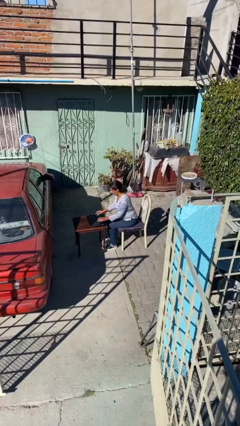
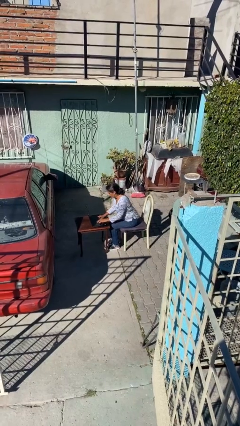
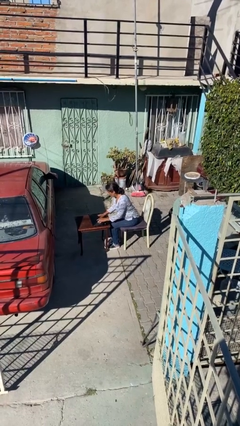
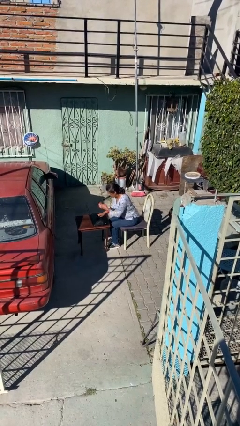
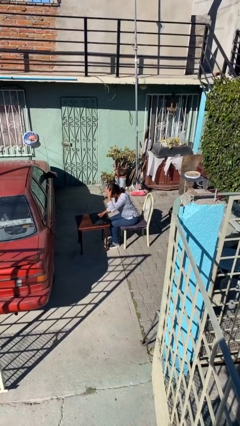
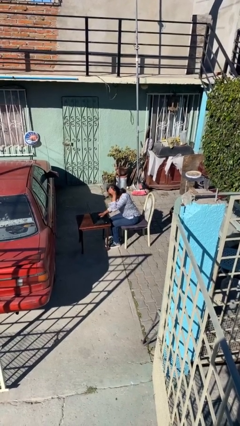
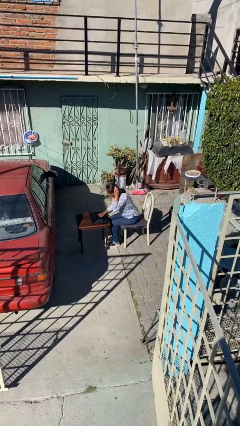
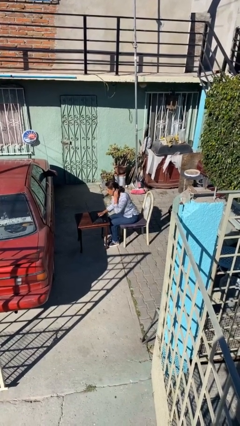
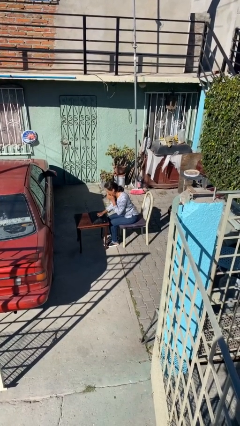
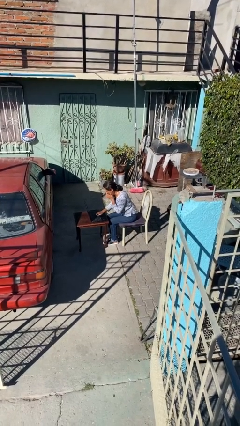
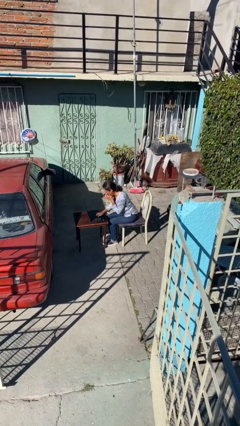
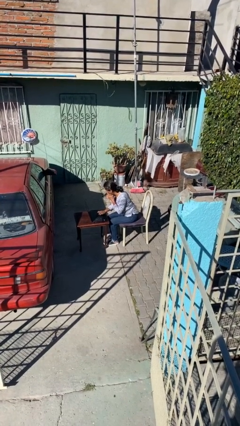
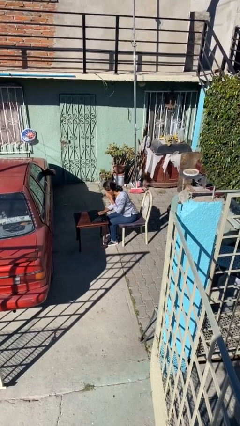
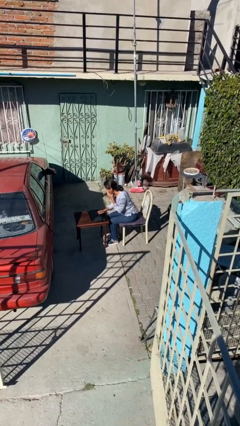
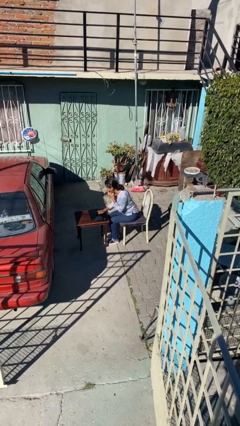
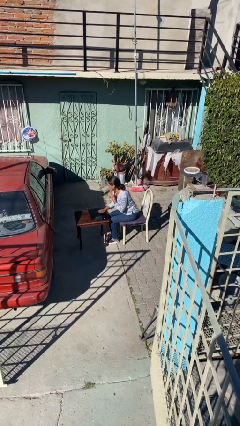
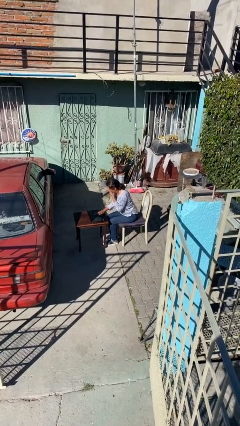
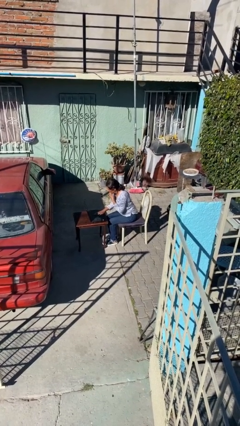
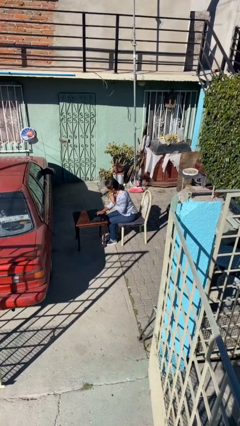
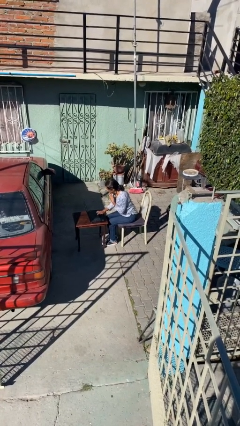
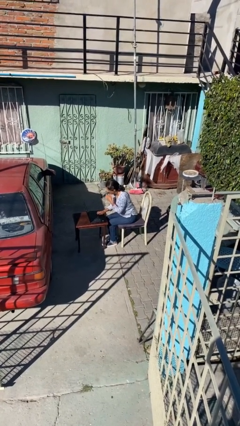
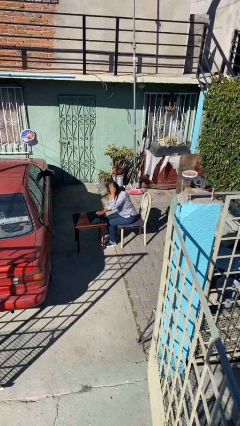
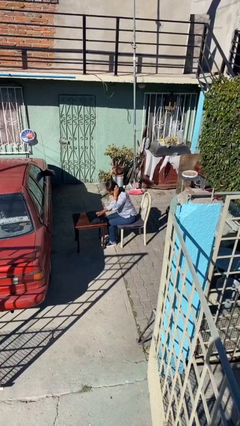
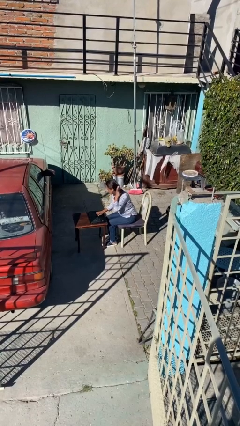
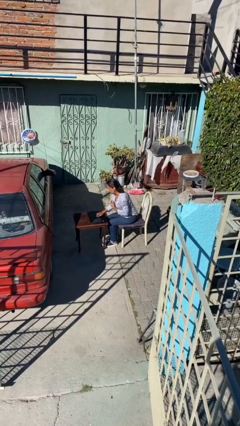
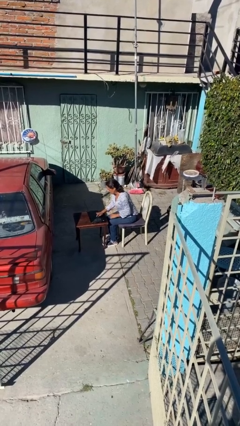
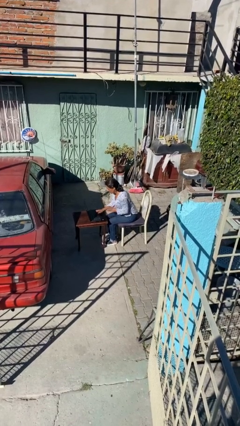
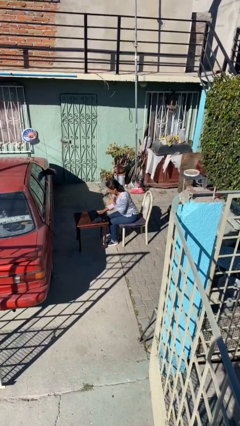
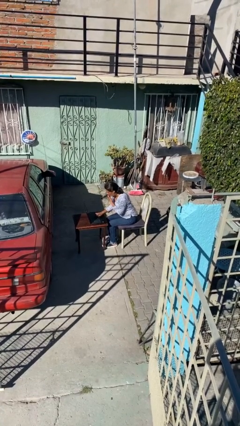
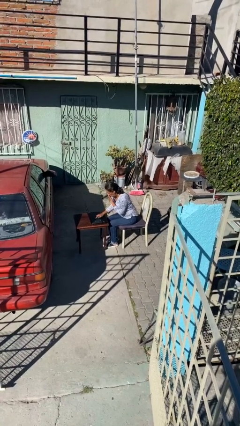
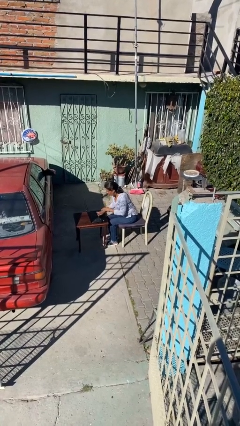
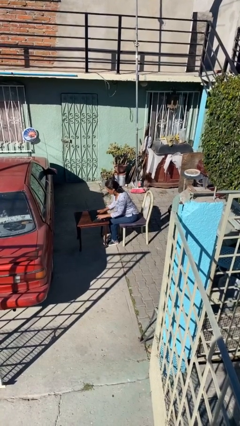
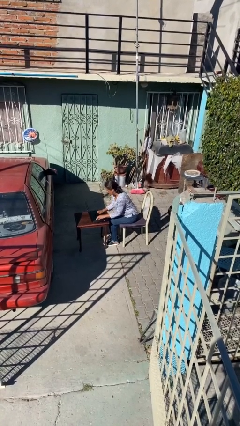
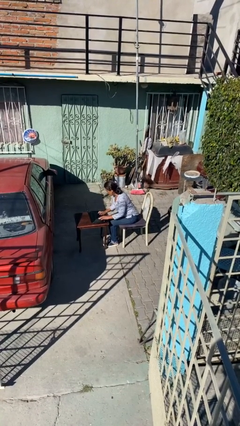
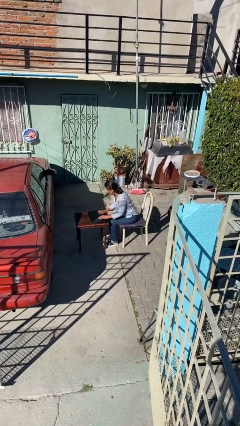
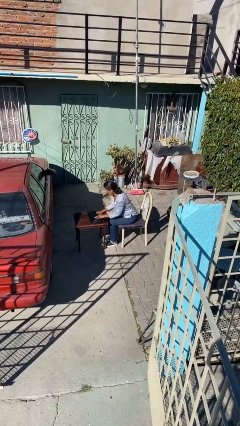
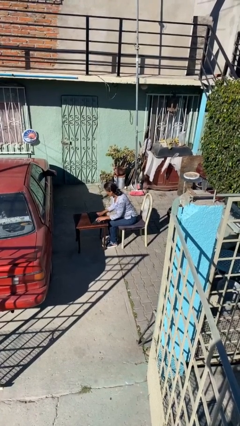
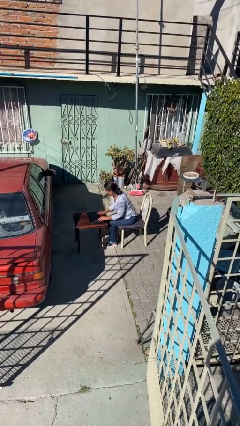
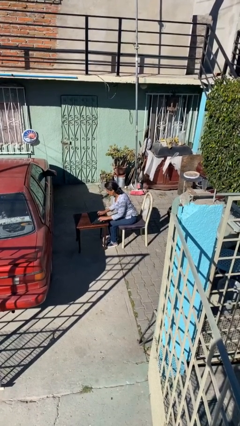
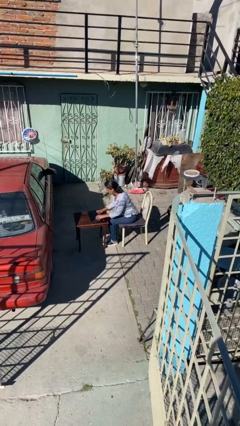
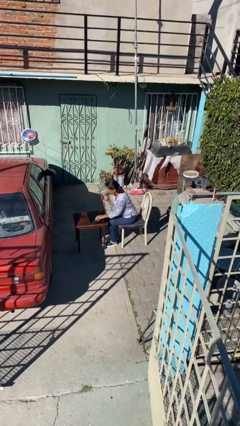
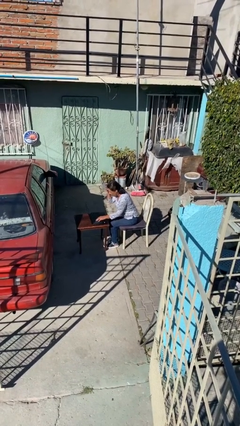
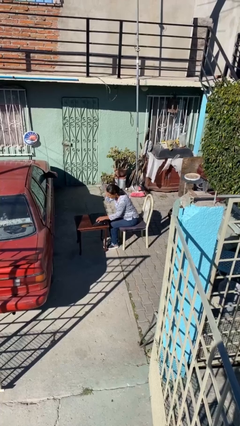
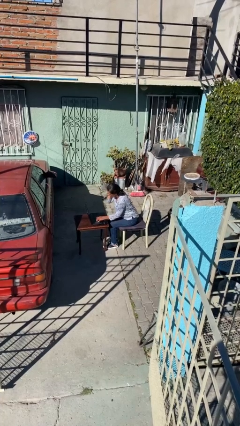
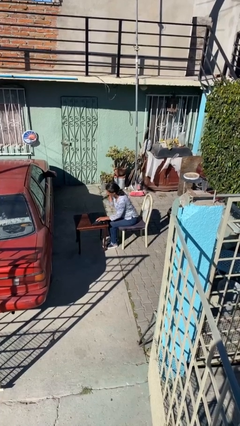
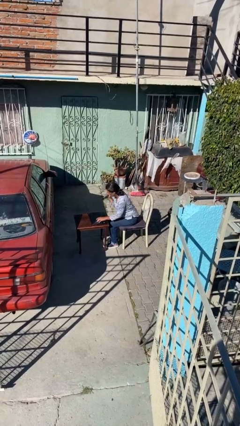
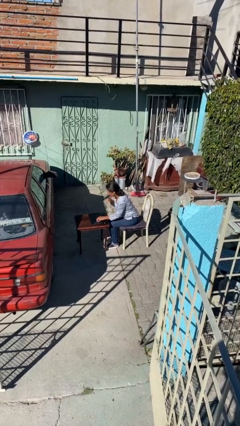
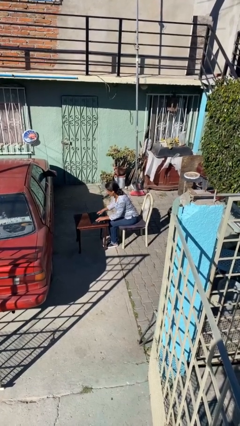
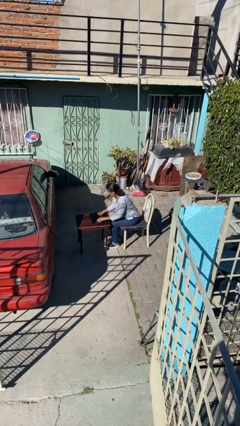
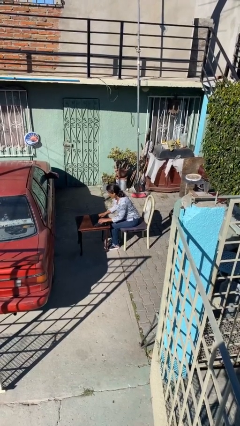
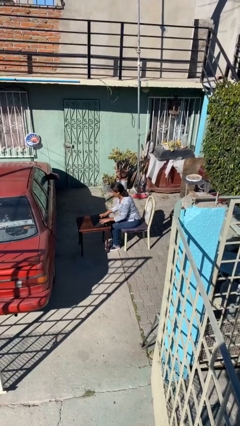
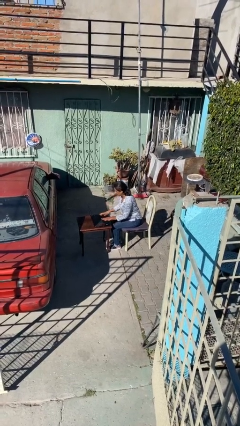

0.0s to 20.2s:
person interacts with laptop

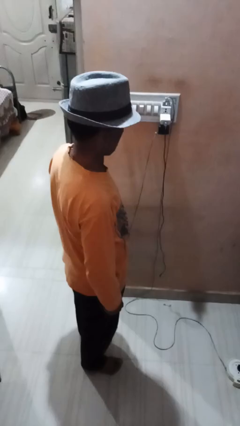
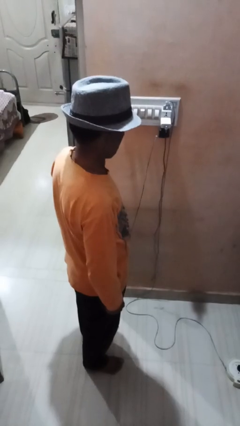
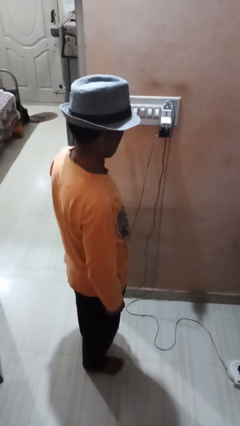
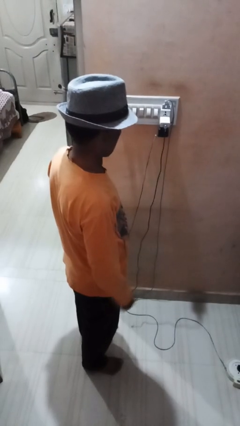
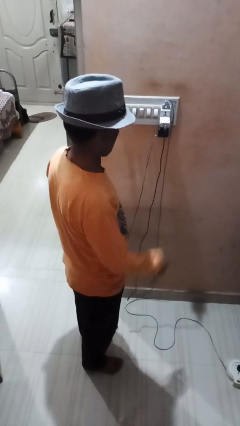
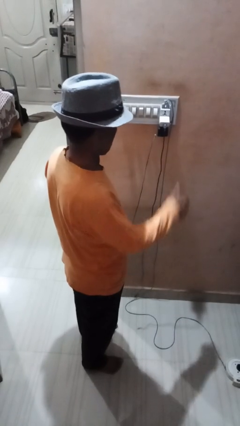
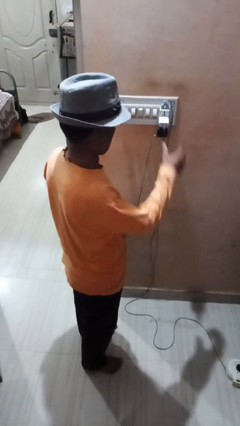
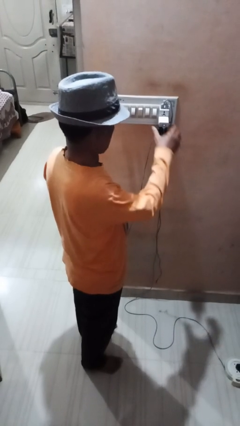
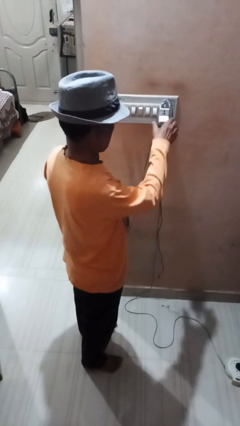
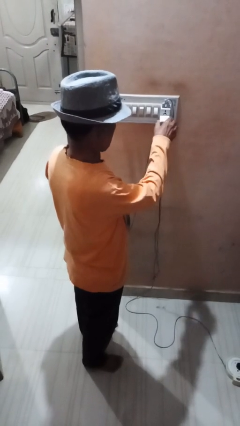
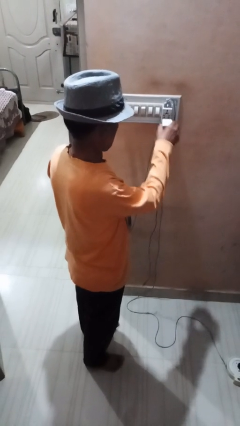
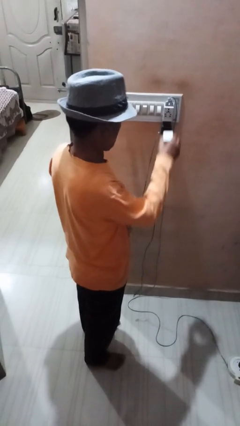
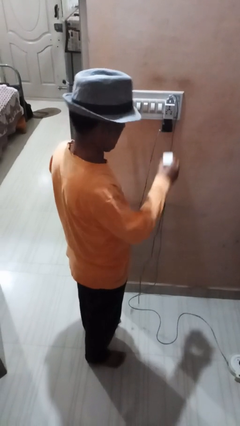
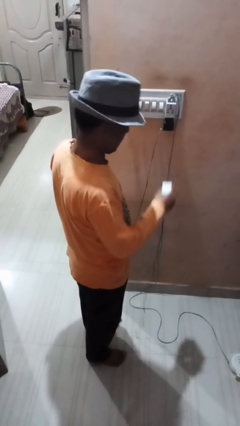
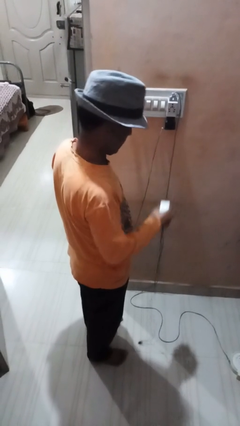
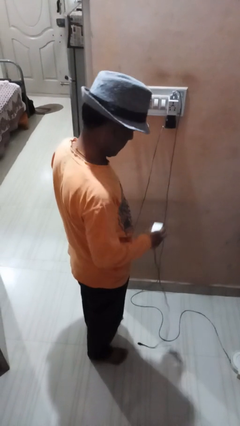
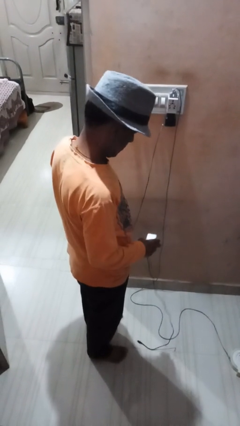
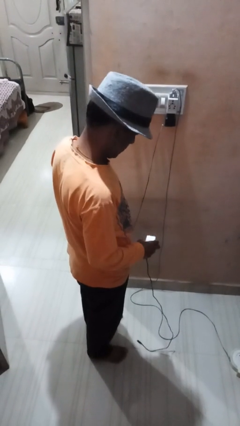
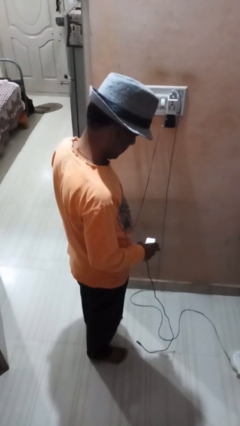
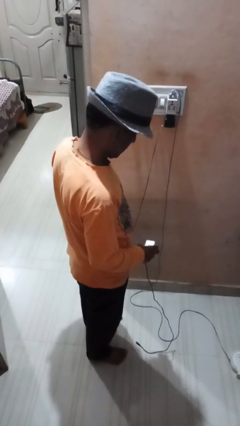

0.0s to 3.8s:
person unplugs from electrical socket

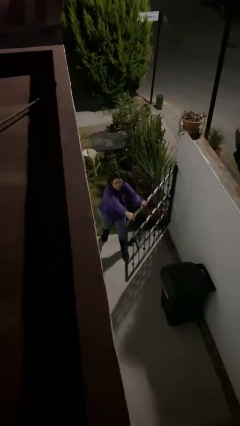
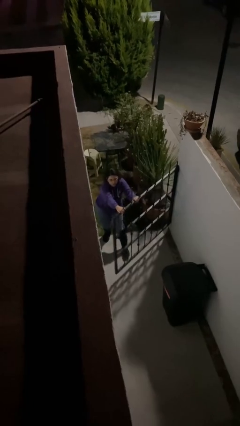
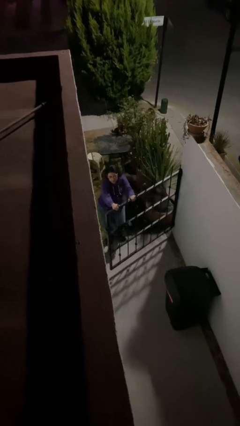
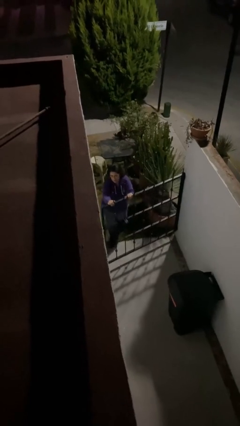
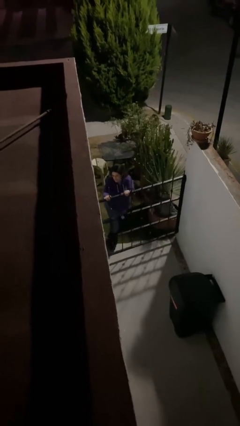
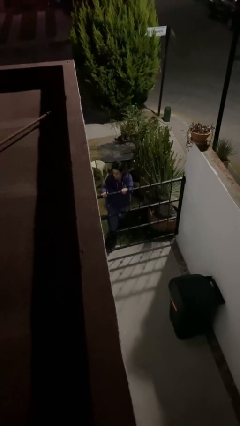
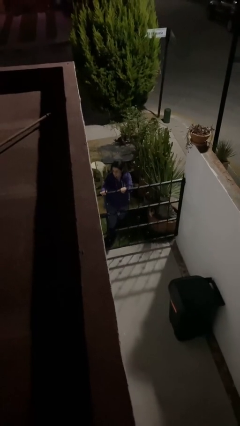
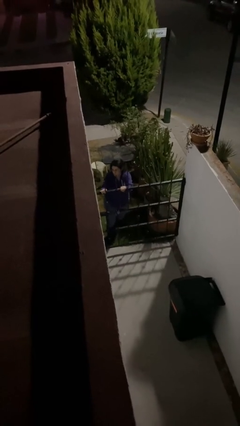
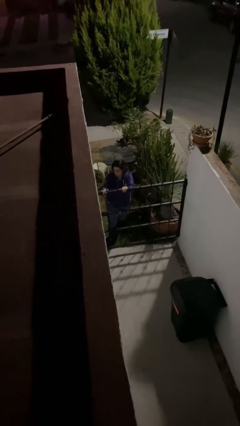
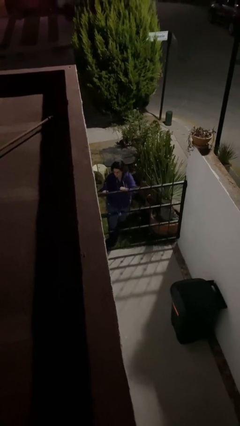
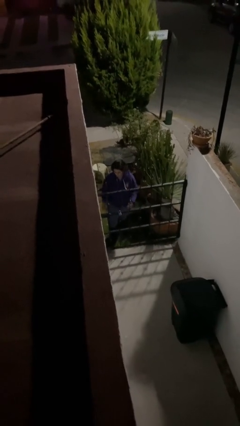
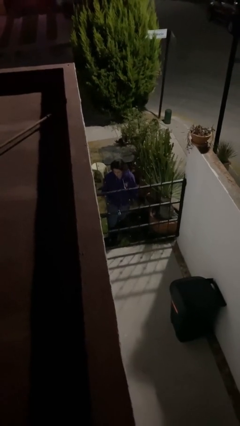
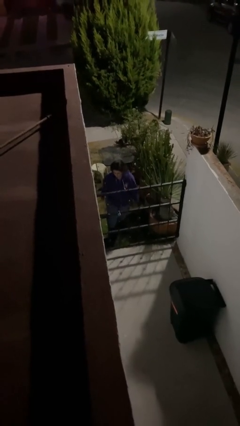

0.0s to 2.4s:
person closes facility door

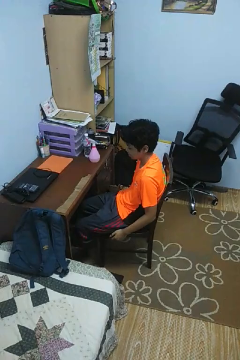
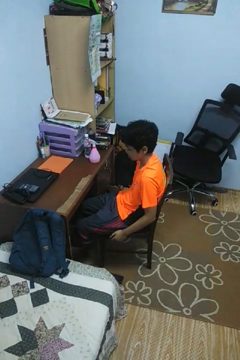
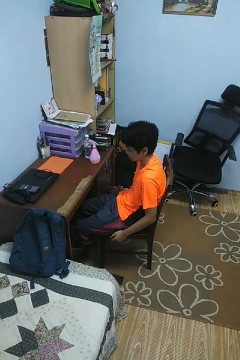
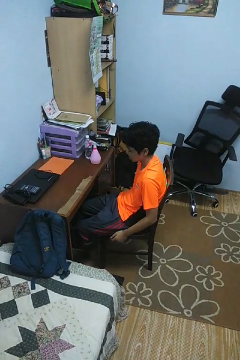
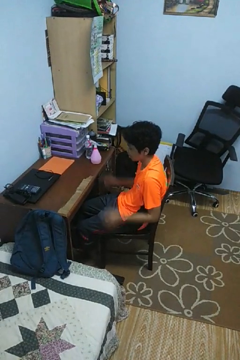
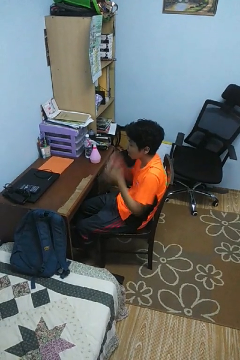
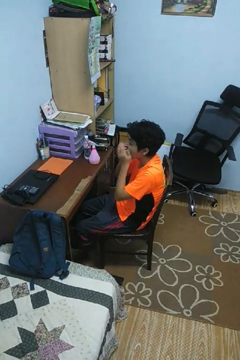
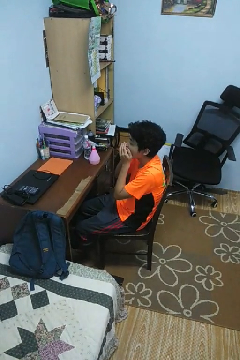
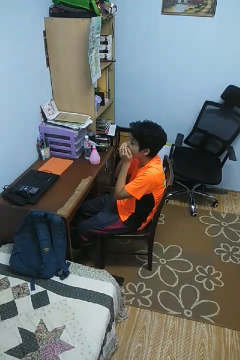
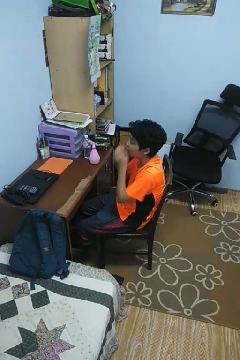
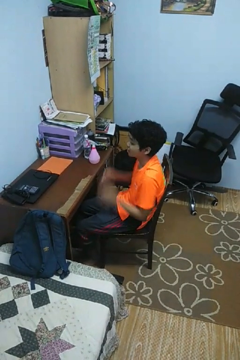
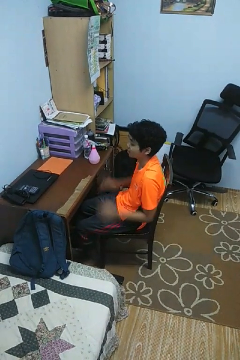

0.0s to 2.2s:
person yawns
